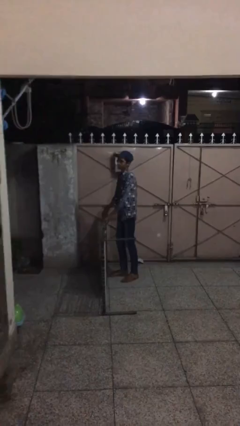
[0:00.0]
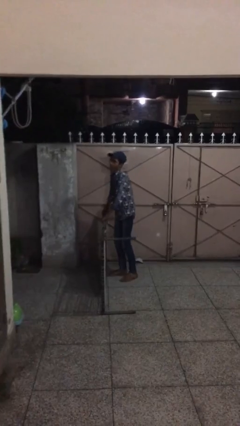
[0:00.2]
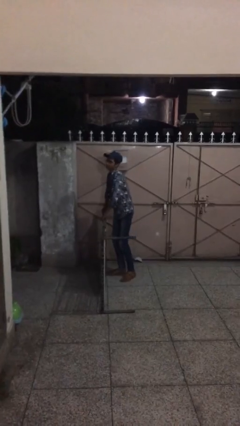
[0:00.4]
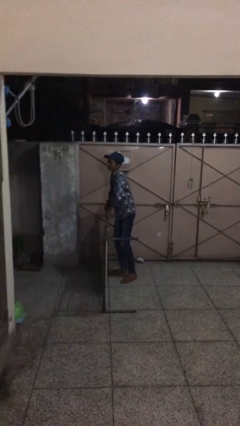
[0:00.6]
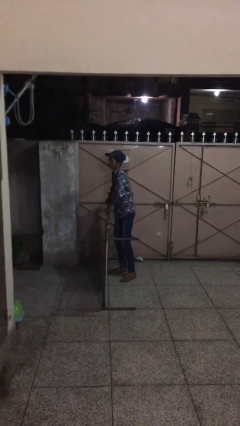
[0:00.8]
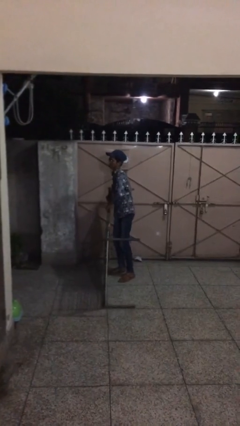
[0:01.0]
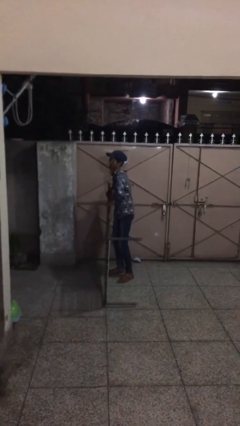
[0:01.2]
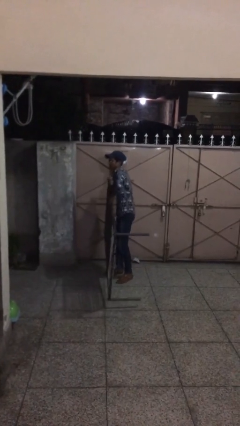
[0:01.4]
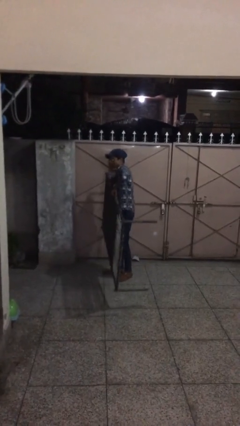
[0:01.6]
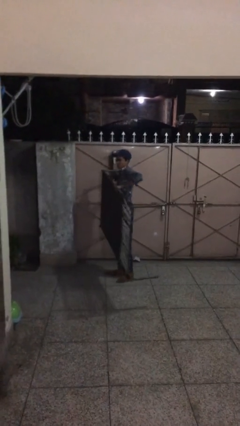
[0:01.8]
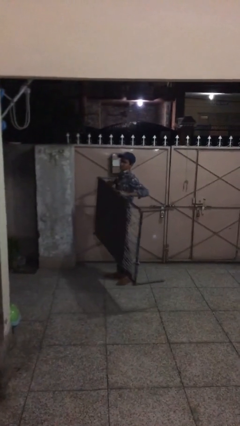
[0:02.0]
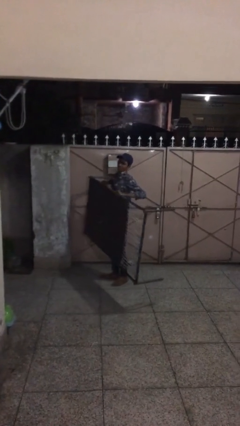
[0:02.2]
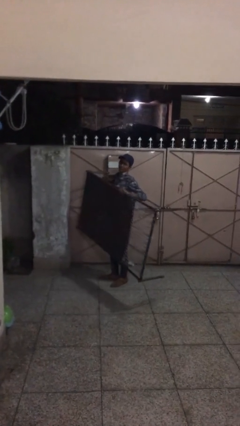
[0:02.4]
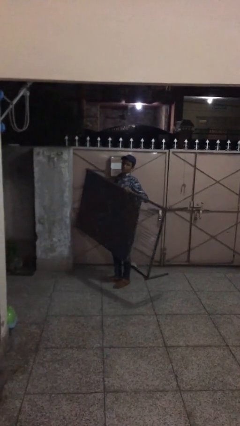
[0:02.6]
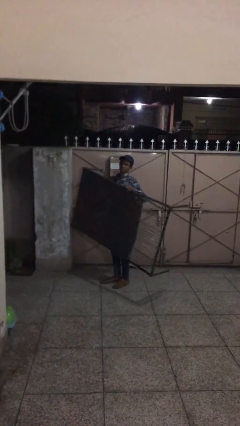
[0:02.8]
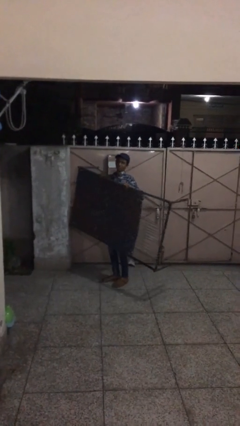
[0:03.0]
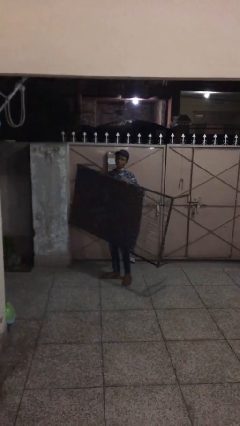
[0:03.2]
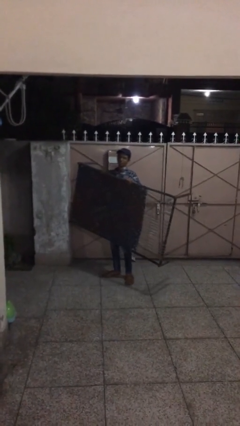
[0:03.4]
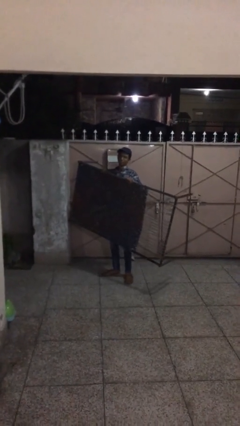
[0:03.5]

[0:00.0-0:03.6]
person picks up object from floor

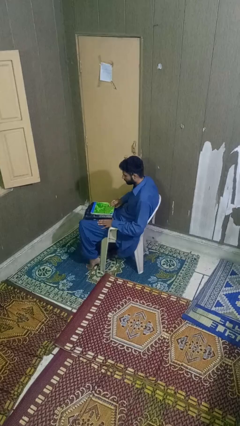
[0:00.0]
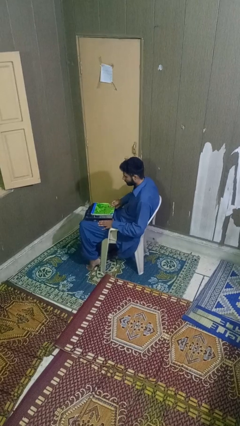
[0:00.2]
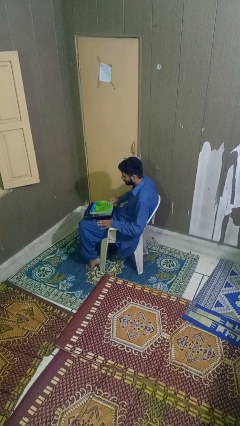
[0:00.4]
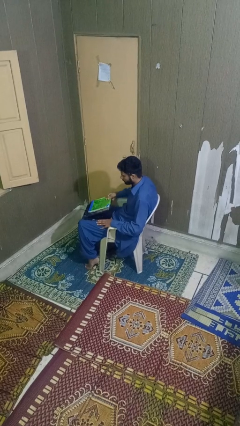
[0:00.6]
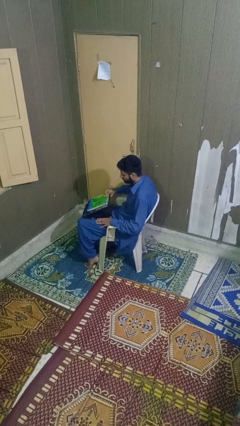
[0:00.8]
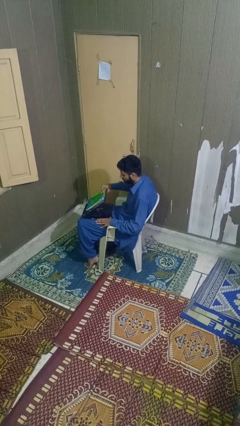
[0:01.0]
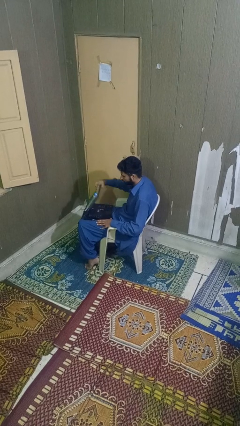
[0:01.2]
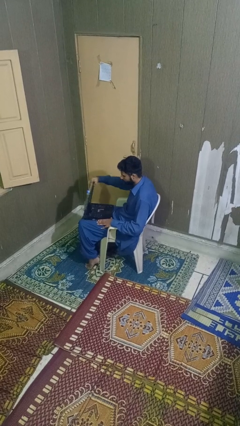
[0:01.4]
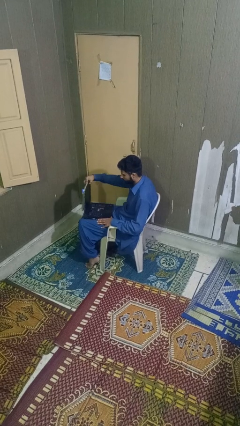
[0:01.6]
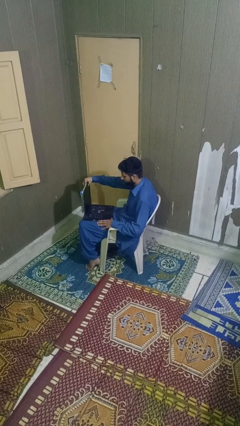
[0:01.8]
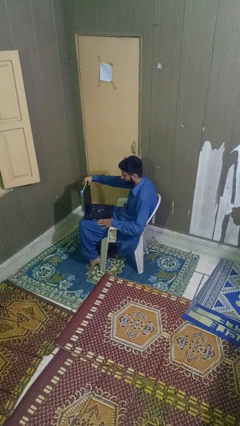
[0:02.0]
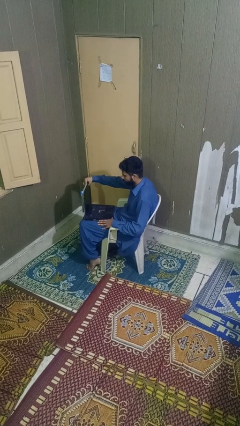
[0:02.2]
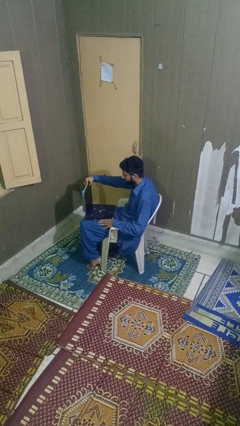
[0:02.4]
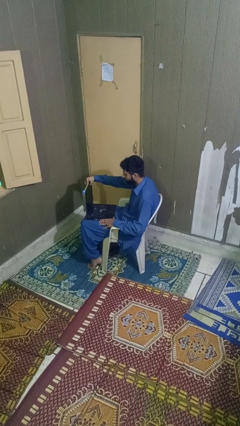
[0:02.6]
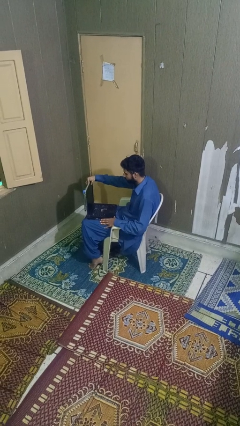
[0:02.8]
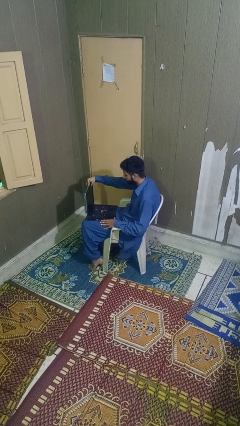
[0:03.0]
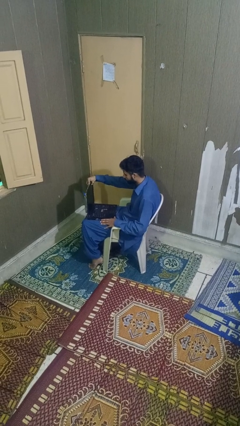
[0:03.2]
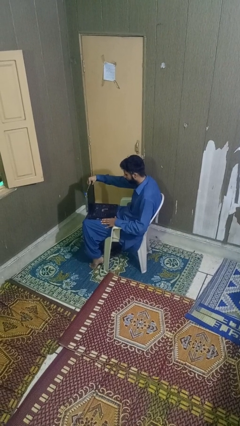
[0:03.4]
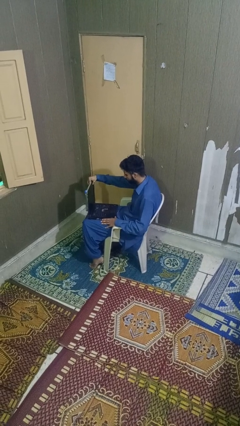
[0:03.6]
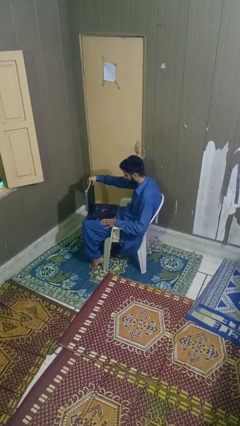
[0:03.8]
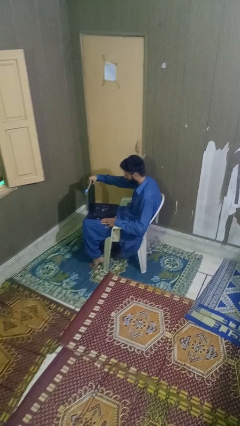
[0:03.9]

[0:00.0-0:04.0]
person opens laptop

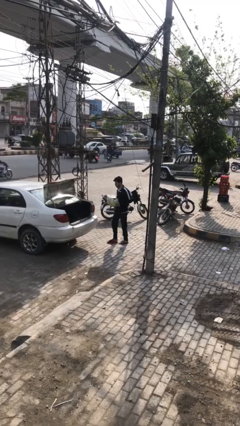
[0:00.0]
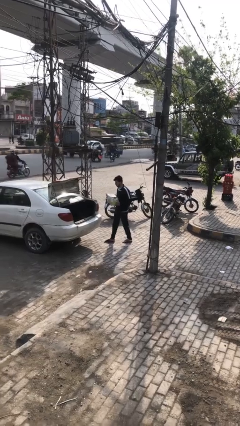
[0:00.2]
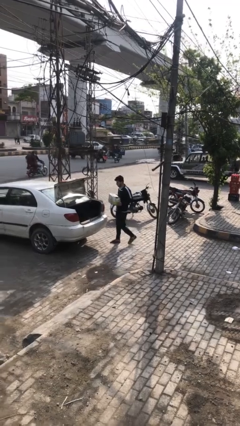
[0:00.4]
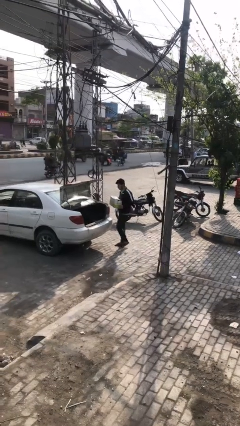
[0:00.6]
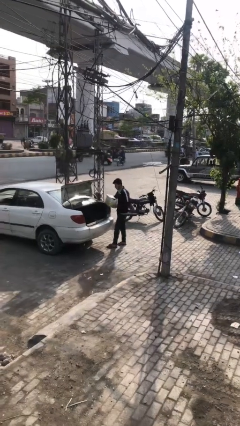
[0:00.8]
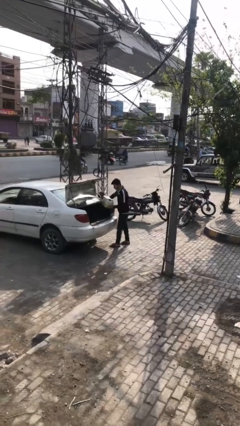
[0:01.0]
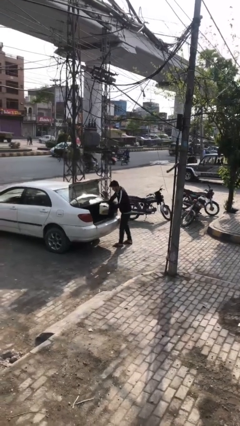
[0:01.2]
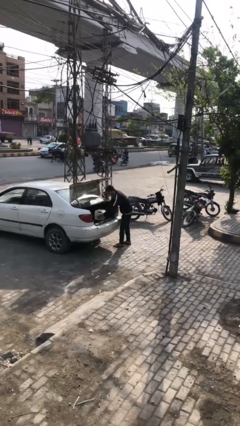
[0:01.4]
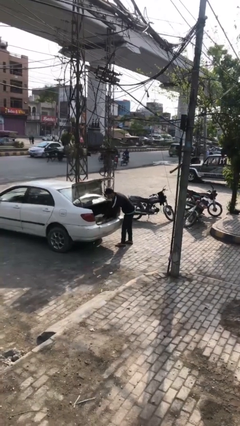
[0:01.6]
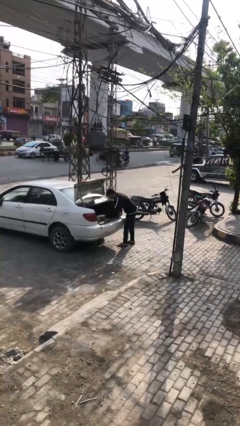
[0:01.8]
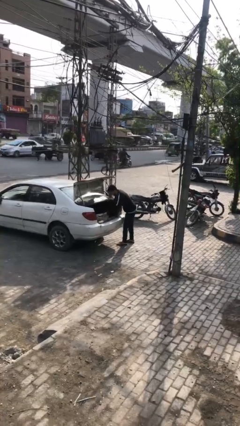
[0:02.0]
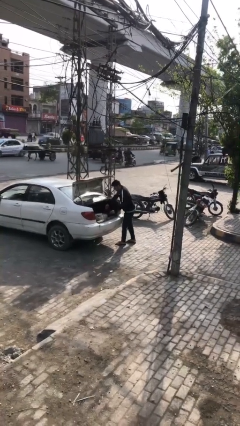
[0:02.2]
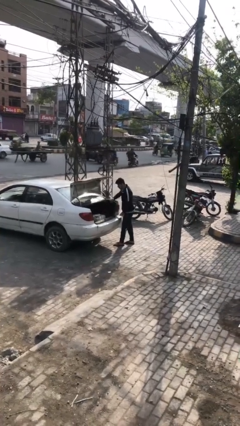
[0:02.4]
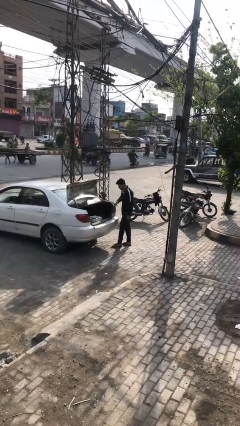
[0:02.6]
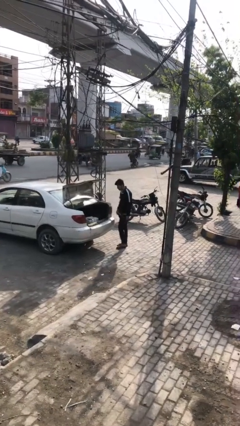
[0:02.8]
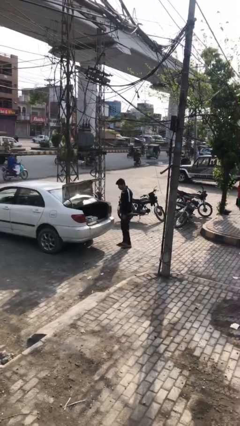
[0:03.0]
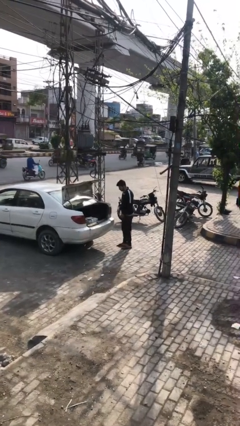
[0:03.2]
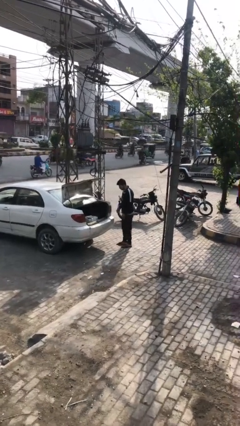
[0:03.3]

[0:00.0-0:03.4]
person loads car

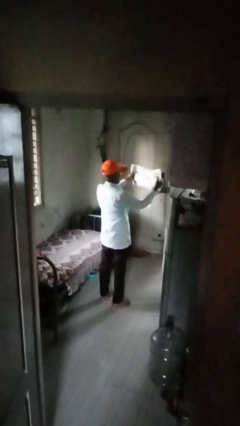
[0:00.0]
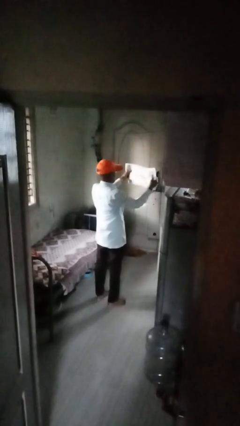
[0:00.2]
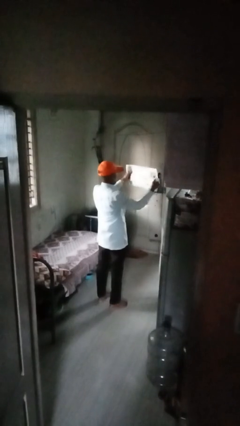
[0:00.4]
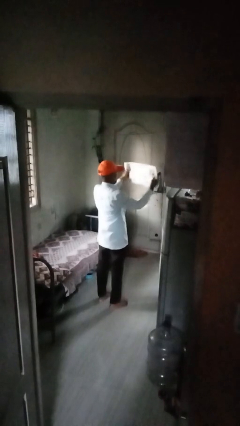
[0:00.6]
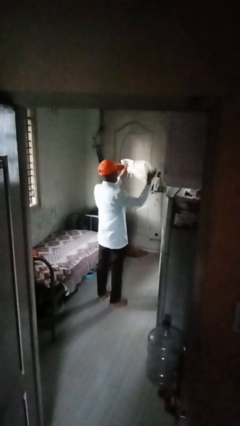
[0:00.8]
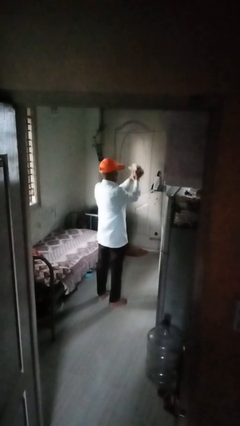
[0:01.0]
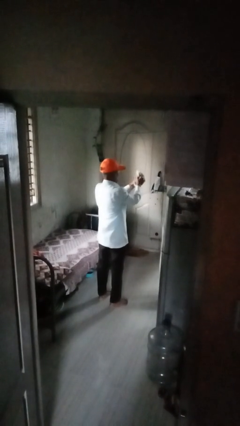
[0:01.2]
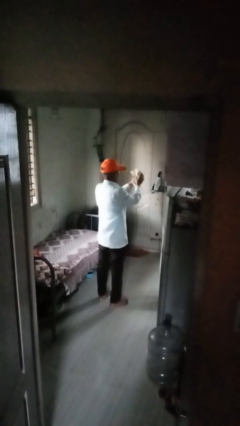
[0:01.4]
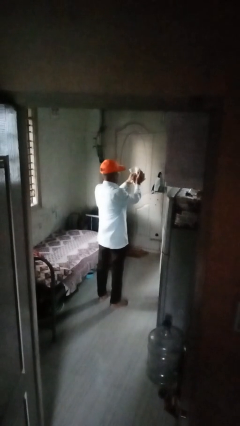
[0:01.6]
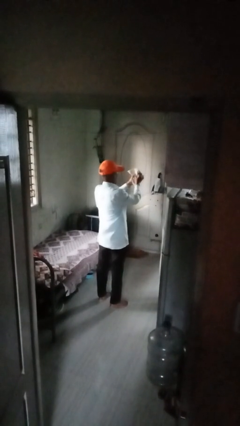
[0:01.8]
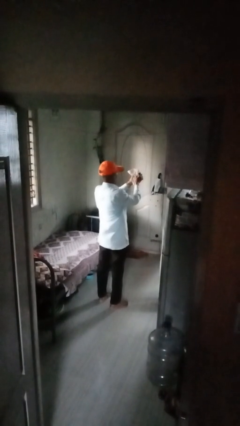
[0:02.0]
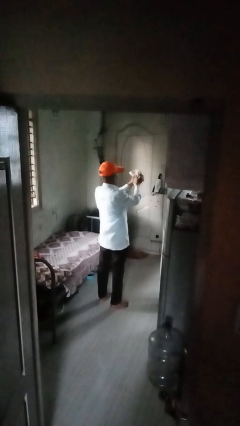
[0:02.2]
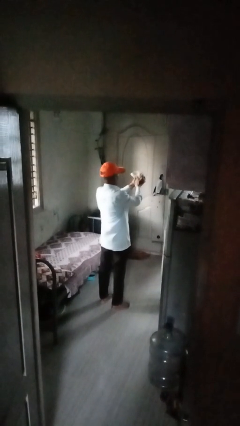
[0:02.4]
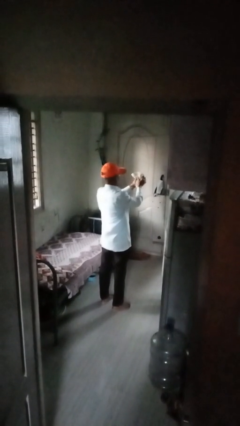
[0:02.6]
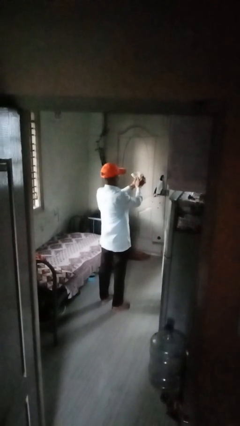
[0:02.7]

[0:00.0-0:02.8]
person crumples paper

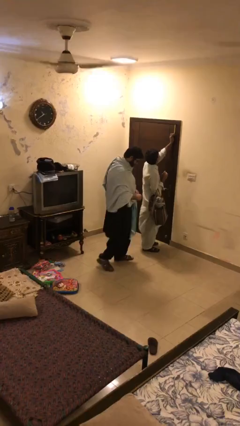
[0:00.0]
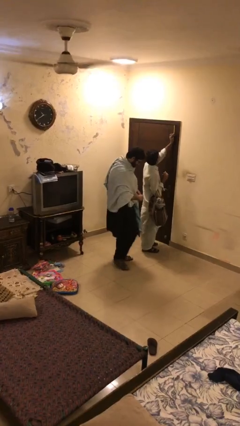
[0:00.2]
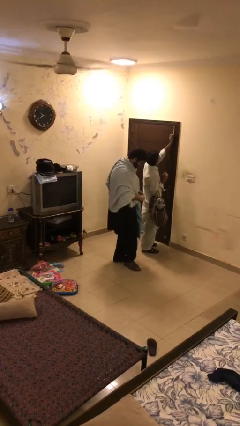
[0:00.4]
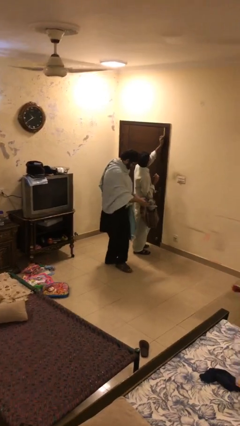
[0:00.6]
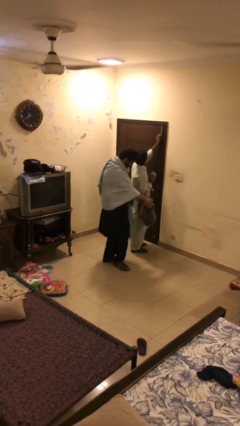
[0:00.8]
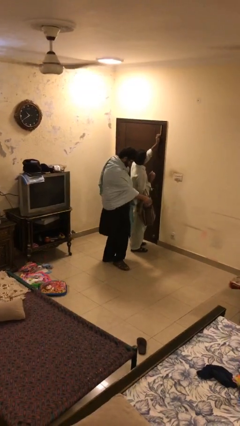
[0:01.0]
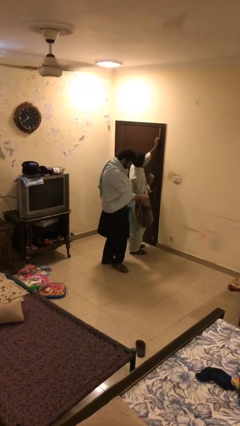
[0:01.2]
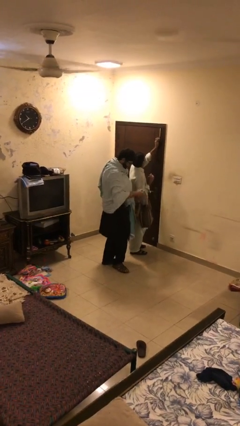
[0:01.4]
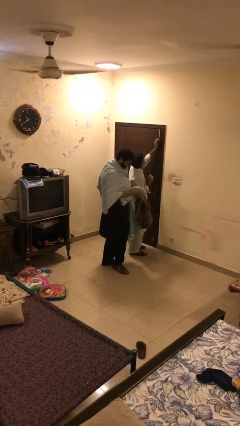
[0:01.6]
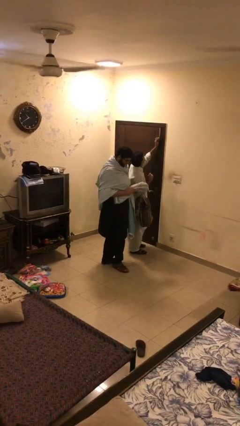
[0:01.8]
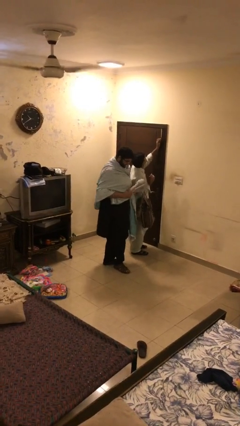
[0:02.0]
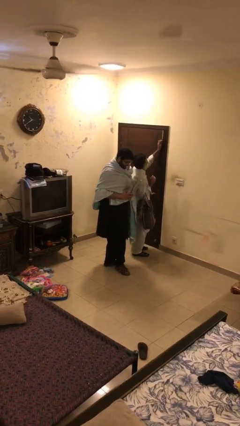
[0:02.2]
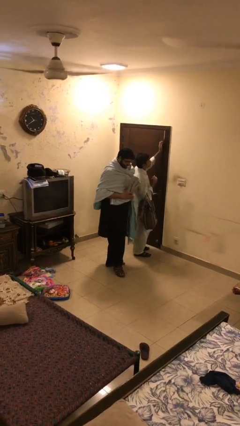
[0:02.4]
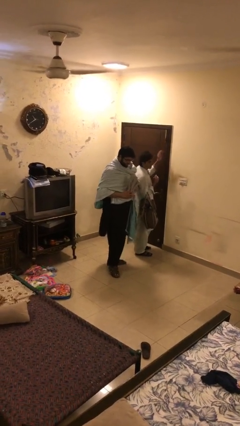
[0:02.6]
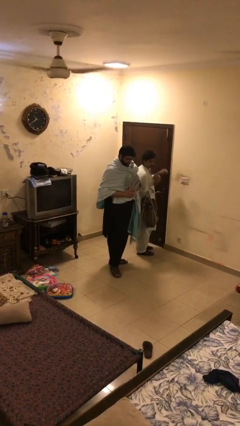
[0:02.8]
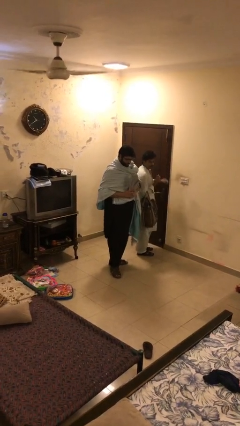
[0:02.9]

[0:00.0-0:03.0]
person steals object from person

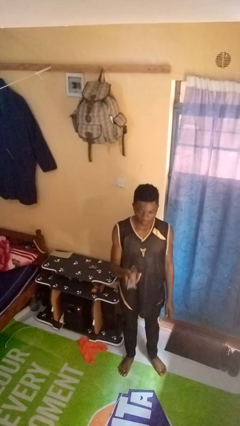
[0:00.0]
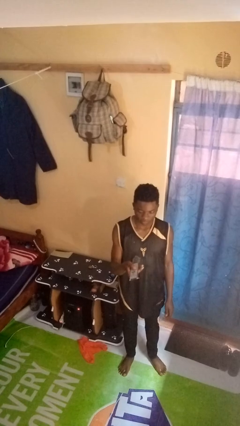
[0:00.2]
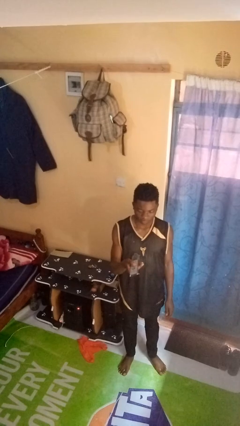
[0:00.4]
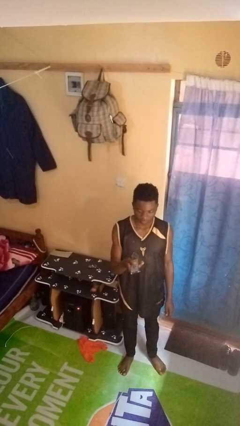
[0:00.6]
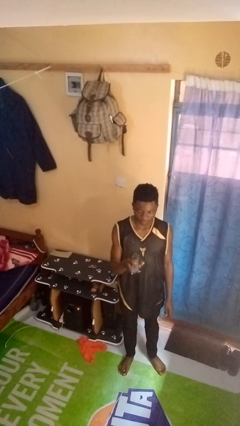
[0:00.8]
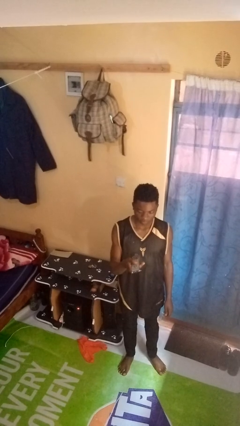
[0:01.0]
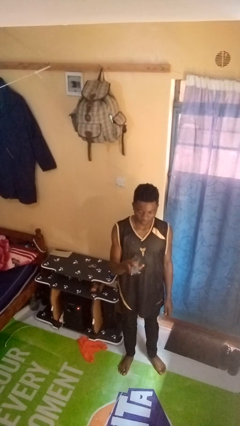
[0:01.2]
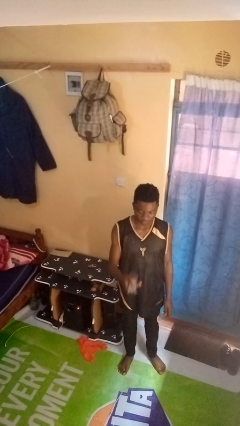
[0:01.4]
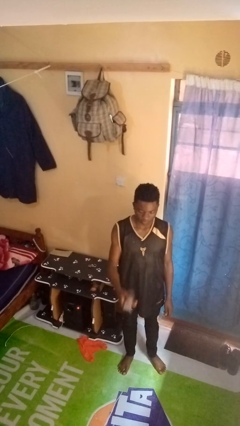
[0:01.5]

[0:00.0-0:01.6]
person uses television remote
